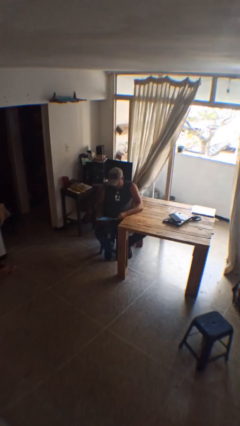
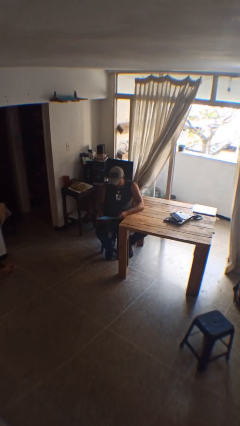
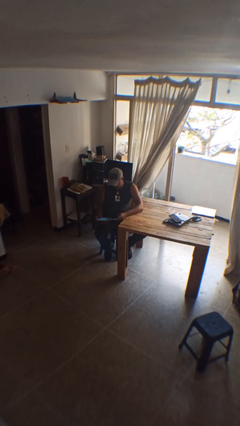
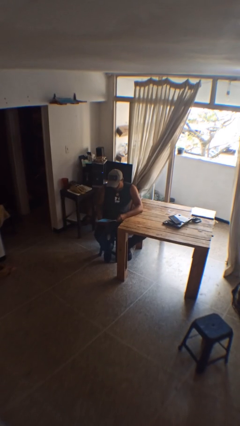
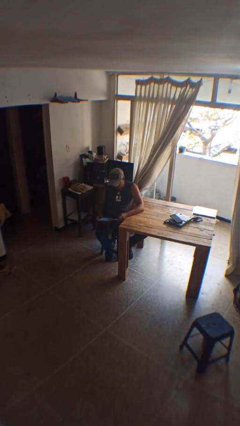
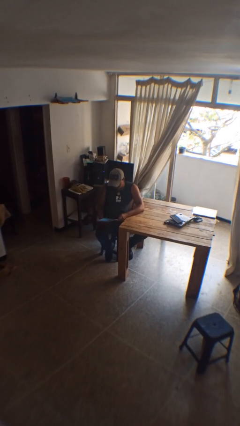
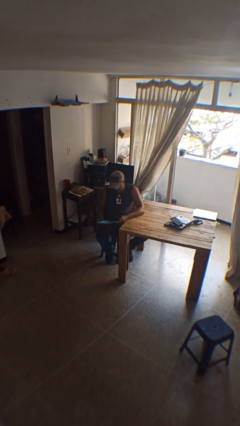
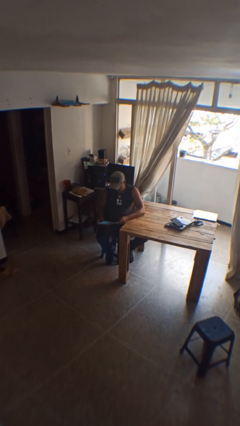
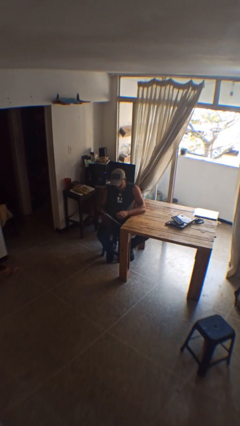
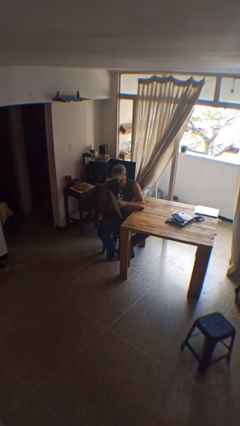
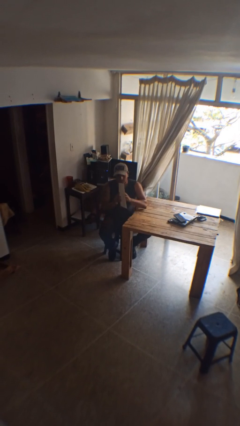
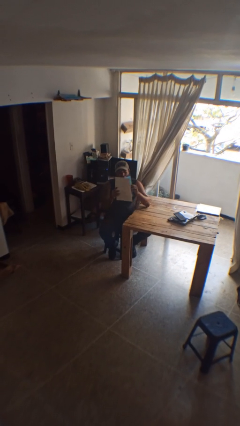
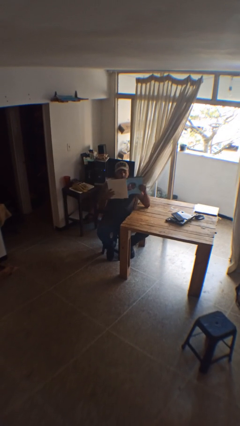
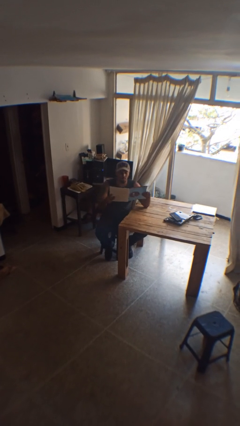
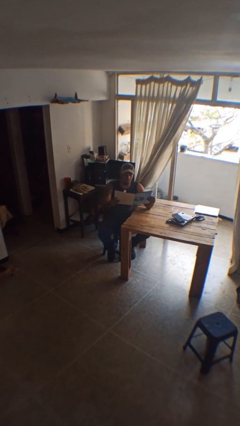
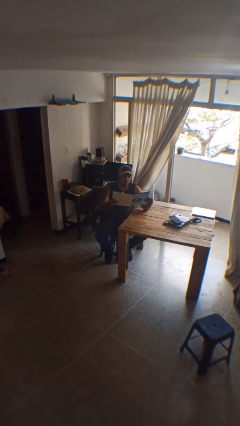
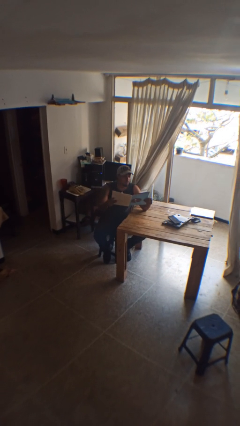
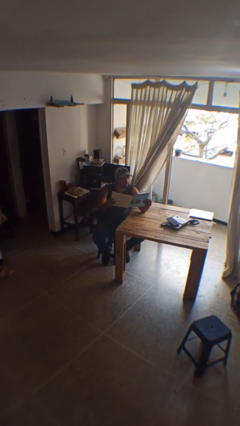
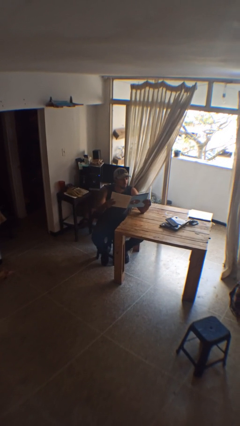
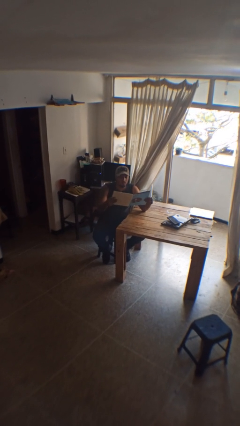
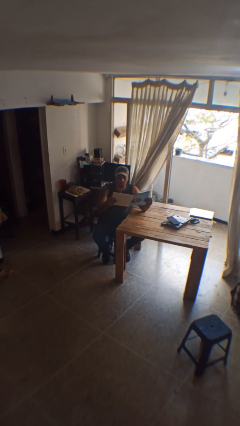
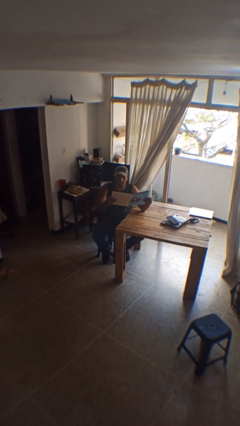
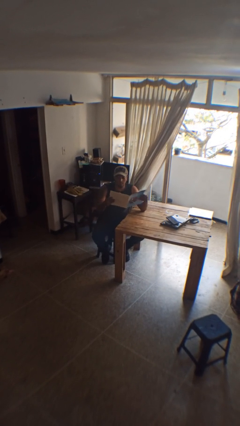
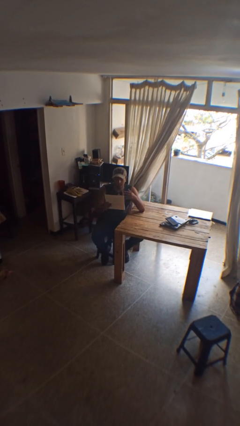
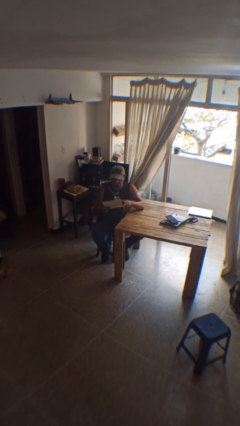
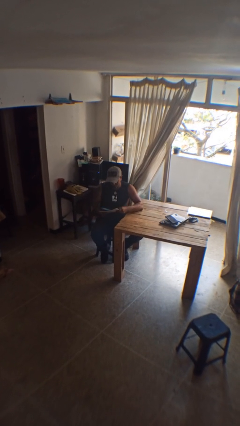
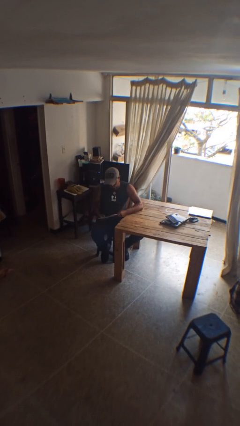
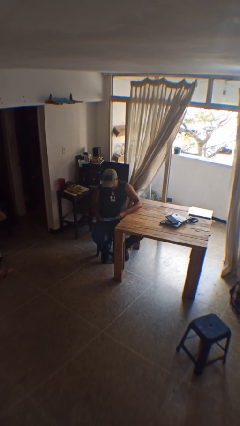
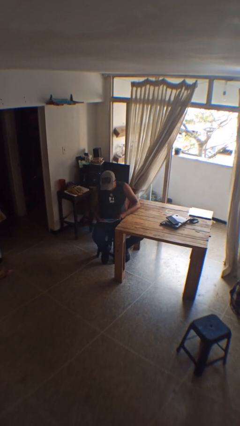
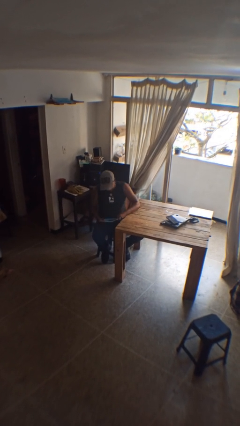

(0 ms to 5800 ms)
person reads document

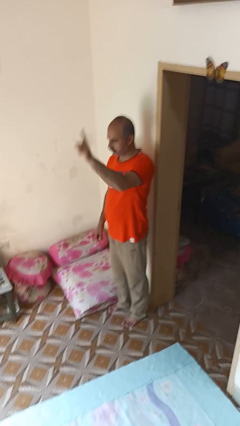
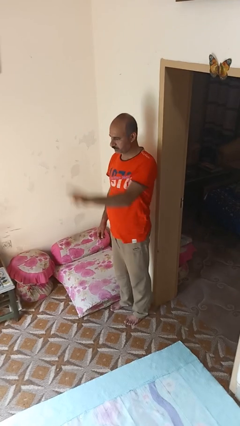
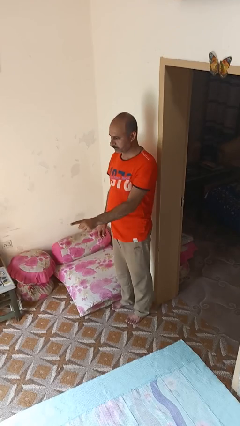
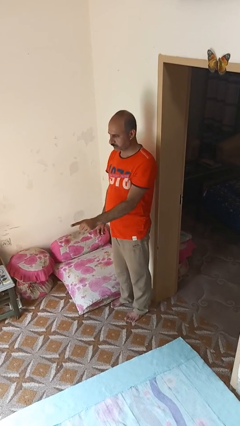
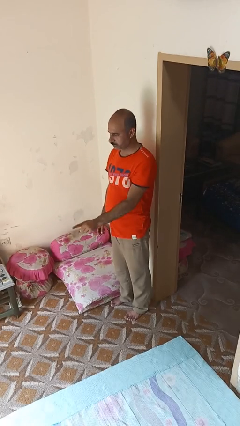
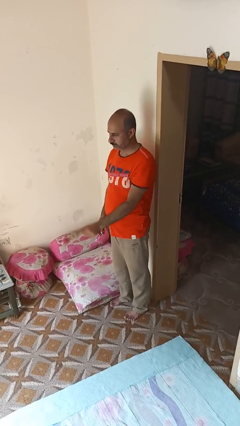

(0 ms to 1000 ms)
person gestures swipe down

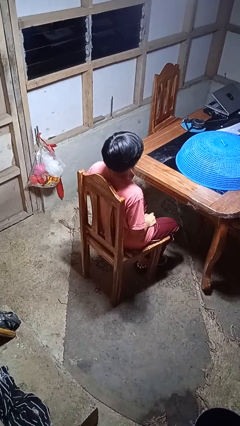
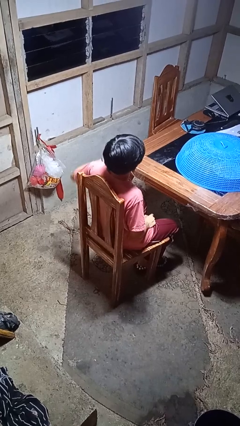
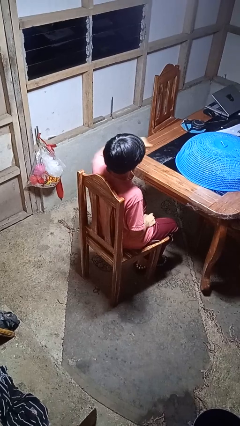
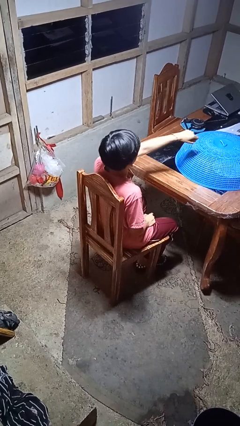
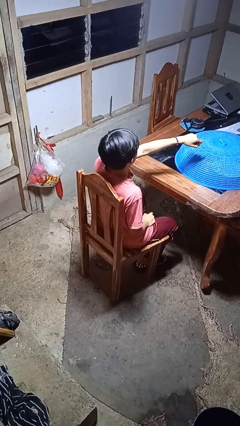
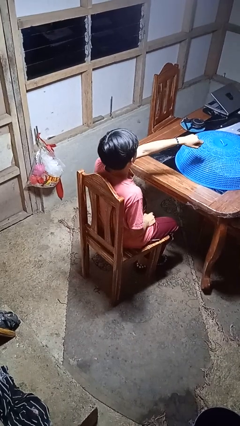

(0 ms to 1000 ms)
person punches

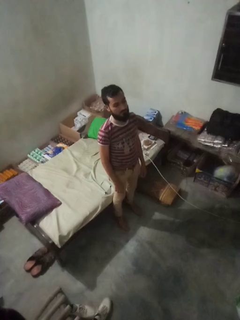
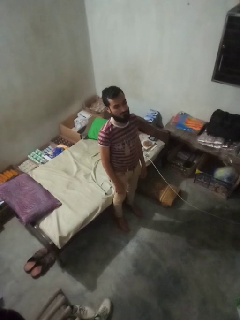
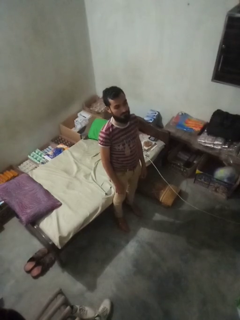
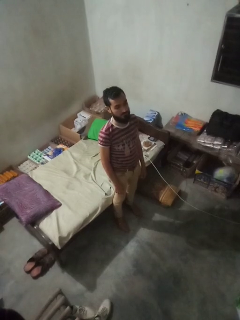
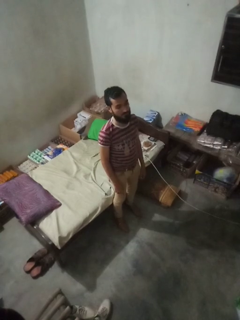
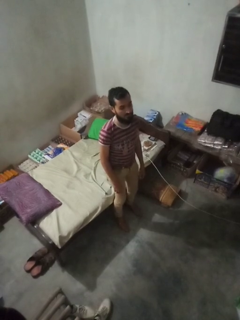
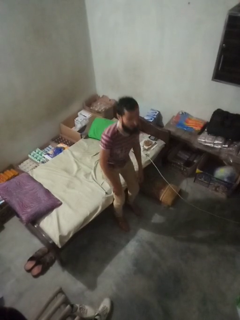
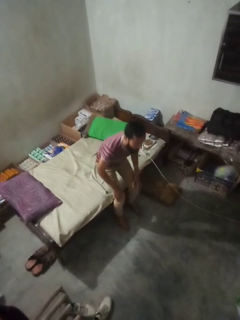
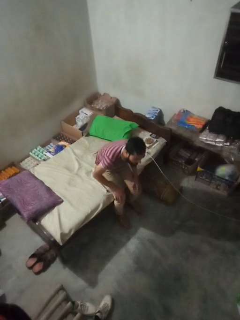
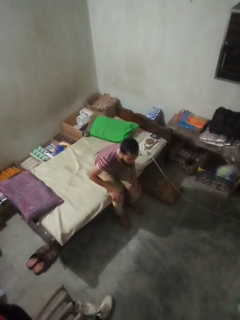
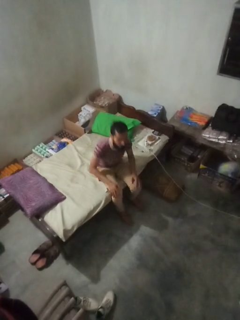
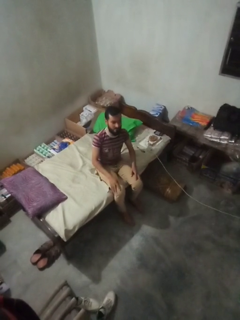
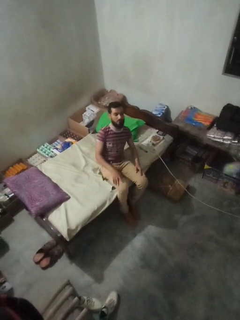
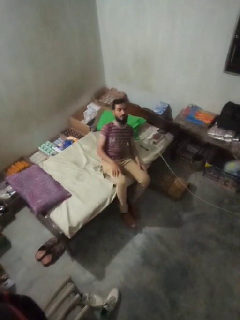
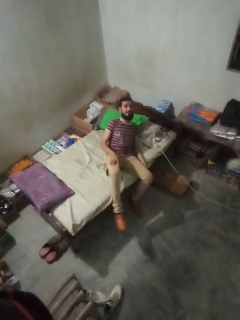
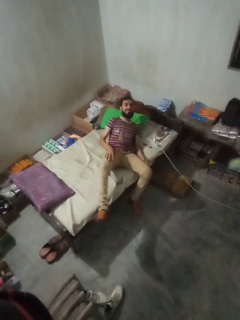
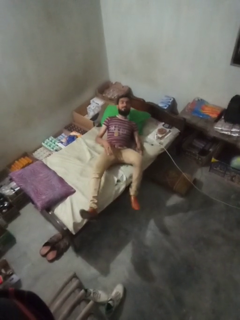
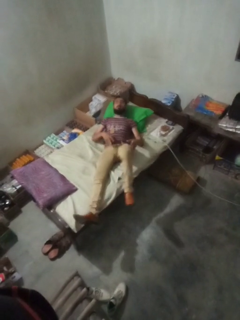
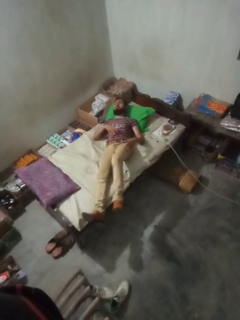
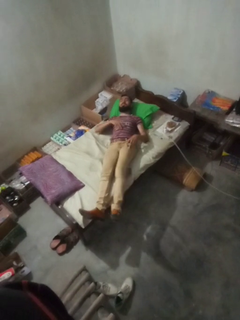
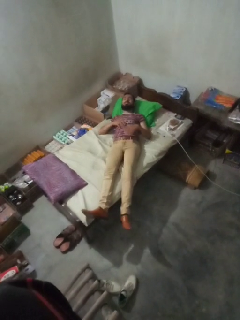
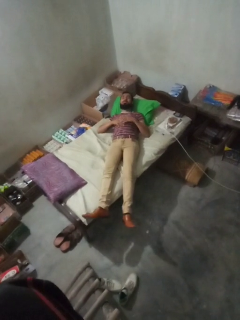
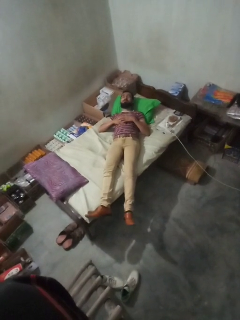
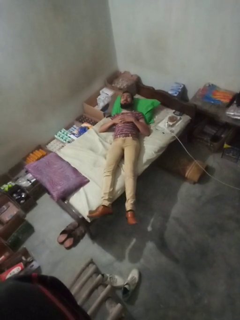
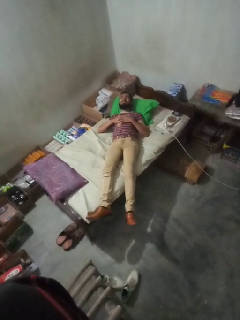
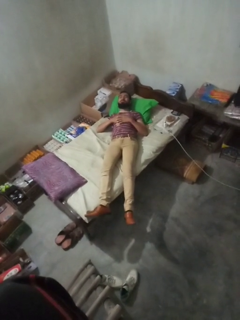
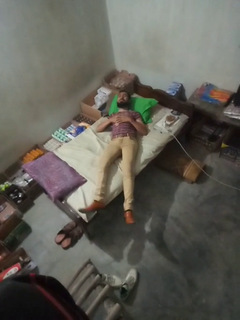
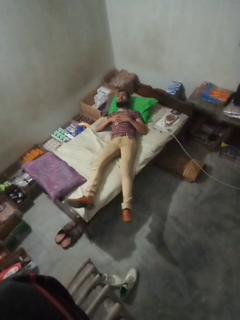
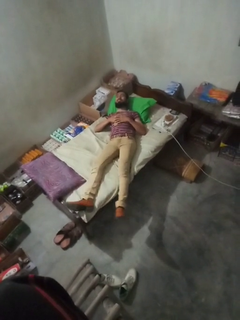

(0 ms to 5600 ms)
person lies down on bed

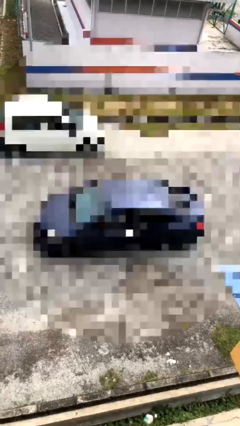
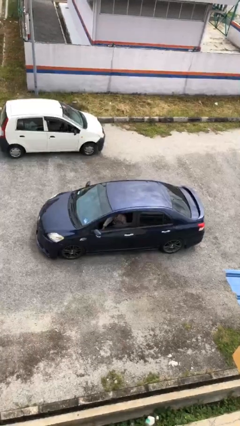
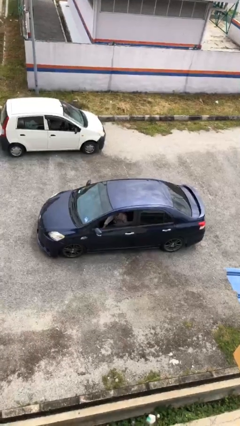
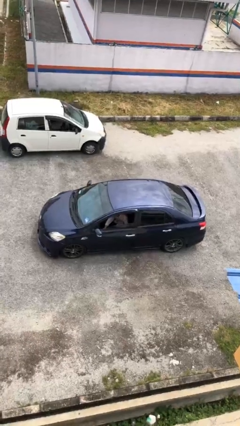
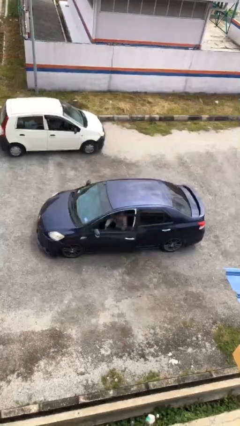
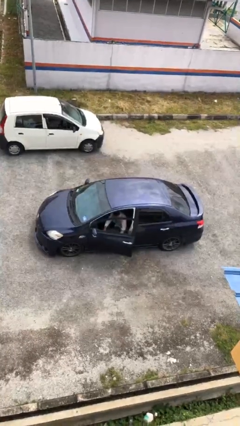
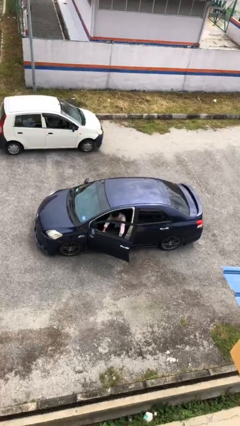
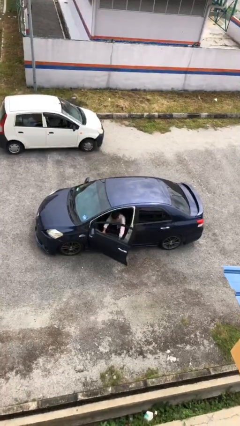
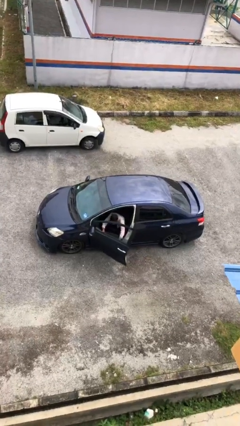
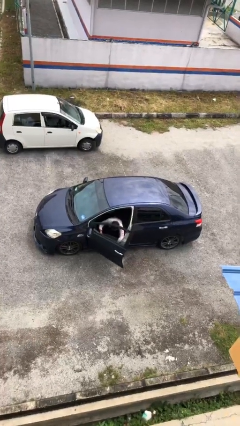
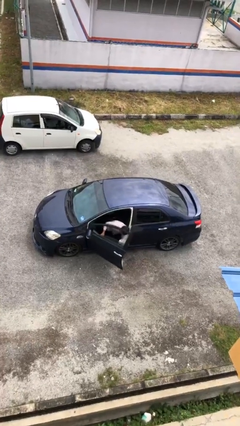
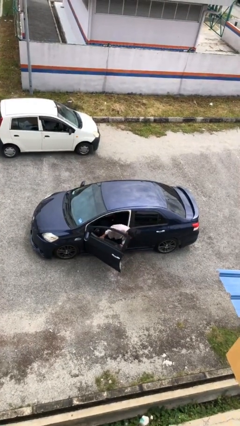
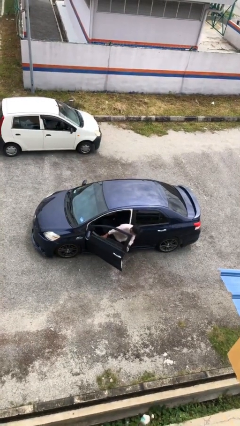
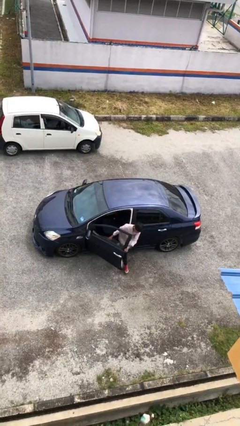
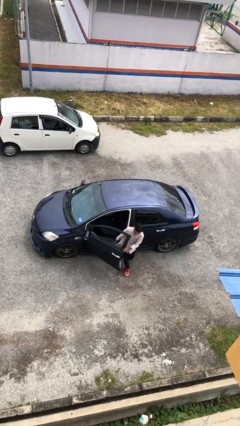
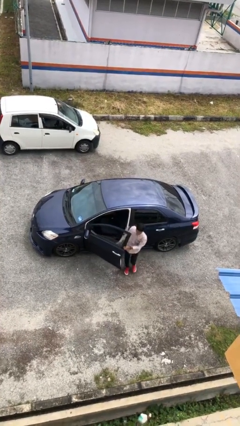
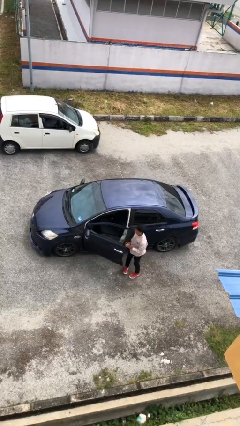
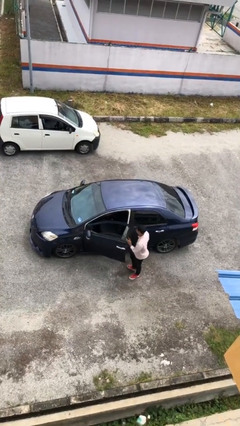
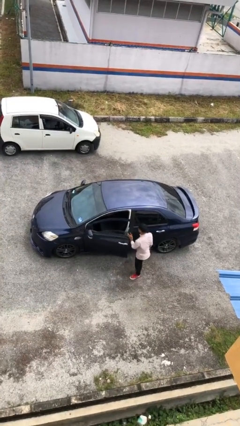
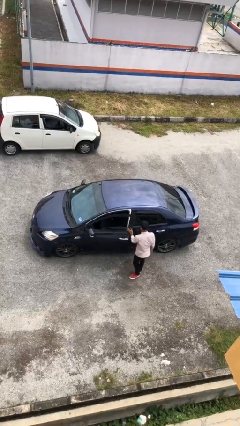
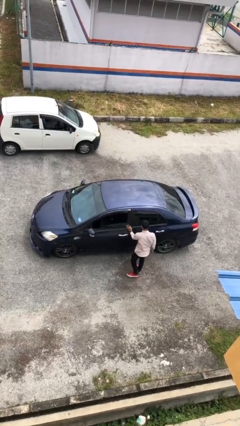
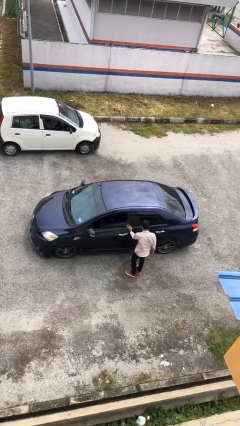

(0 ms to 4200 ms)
car drops off person

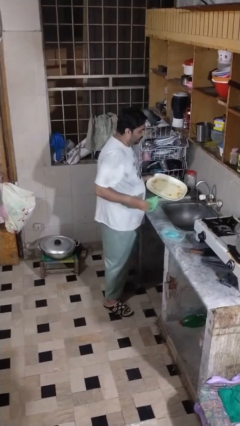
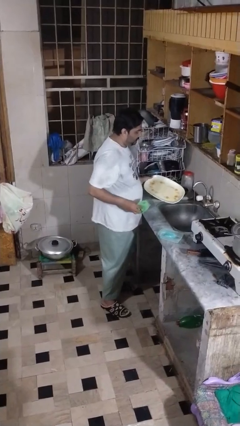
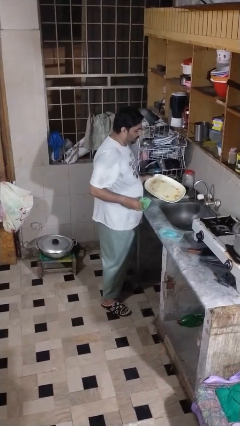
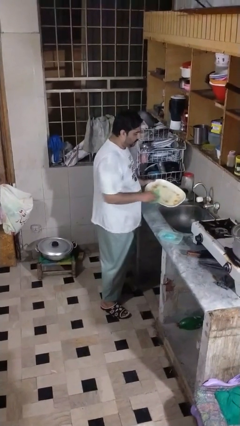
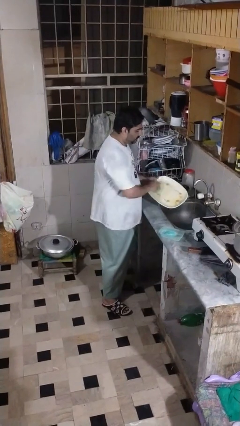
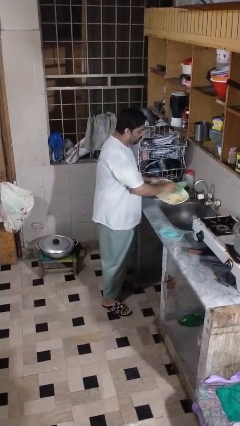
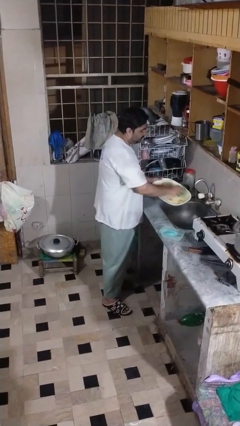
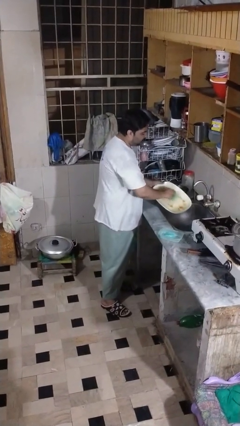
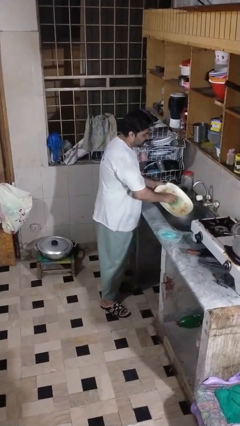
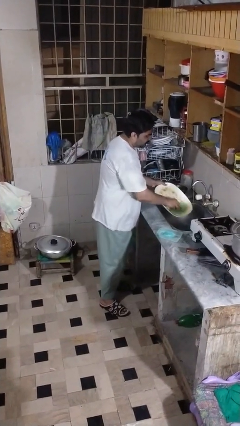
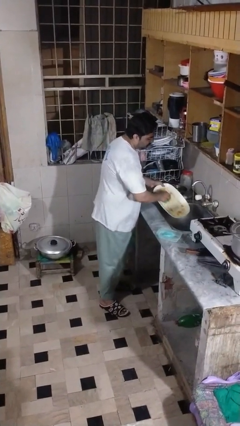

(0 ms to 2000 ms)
person washes dish
